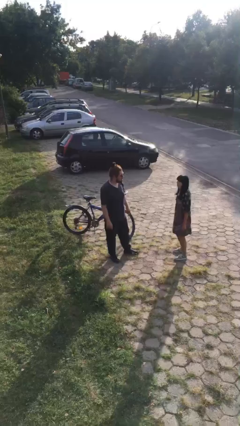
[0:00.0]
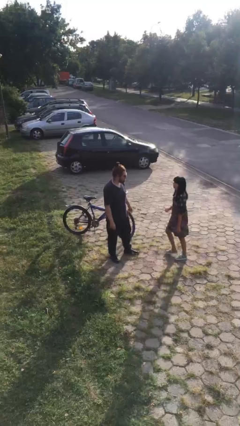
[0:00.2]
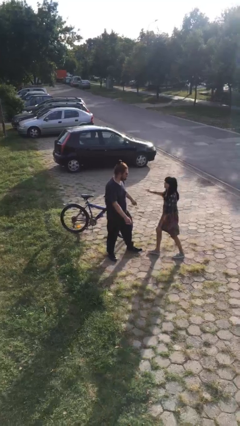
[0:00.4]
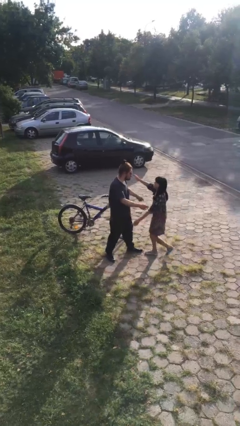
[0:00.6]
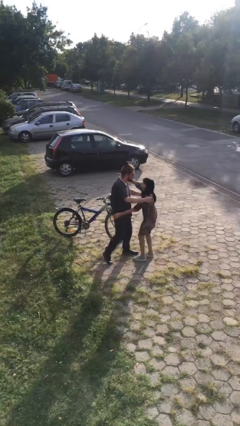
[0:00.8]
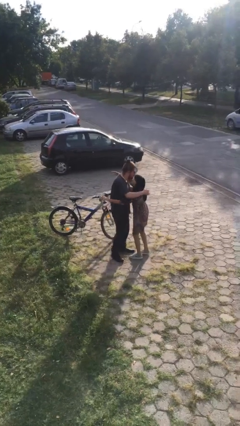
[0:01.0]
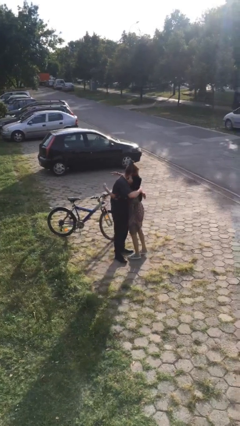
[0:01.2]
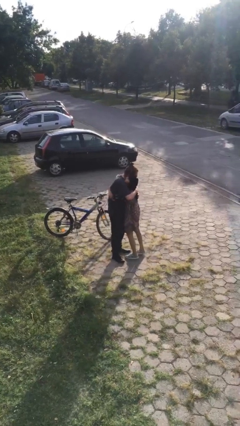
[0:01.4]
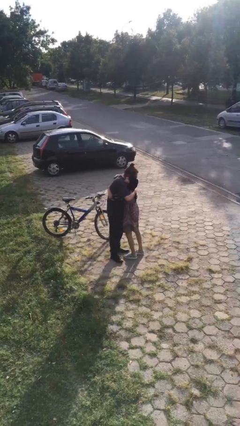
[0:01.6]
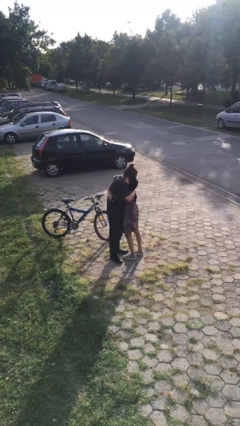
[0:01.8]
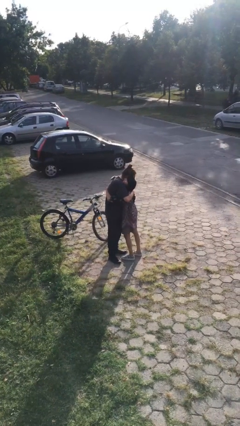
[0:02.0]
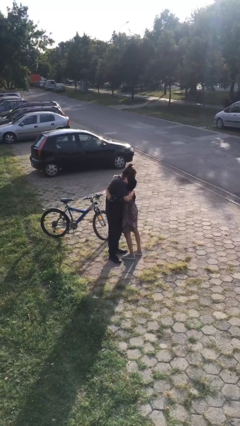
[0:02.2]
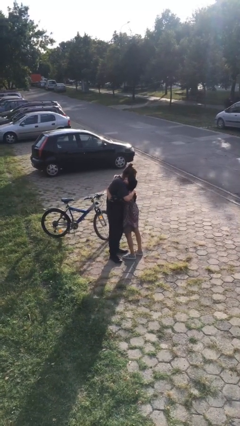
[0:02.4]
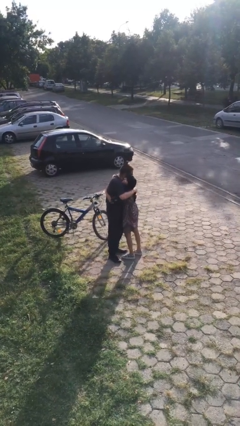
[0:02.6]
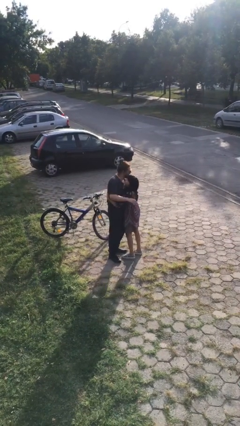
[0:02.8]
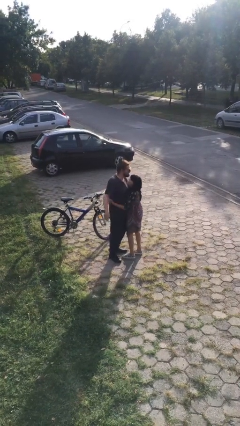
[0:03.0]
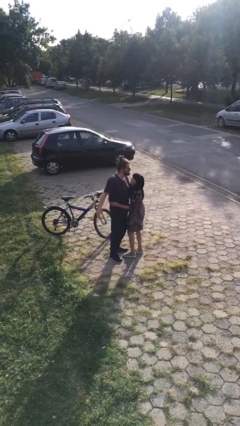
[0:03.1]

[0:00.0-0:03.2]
person embraces person

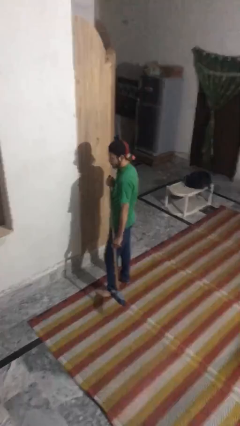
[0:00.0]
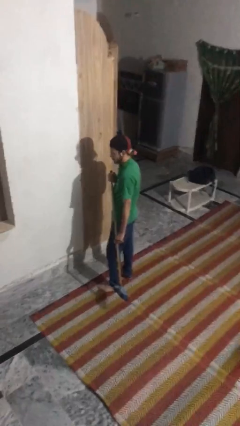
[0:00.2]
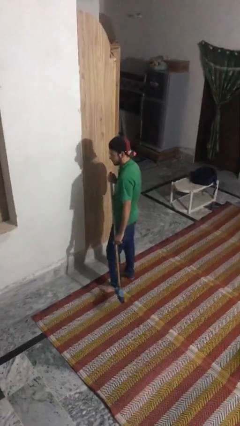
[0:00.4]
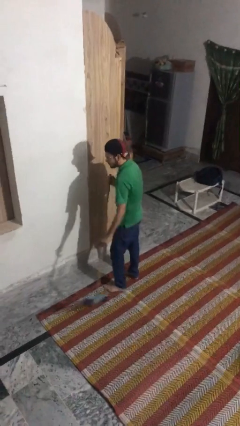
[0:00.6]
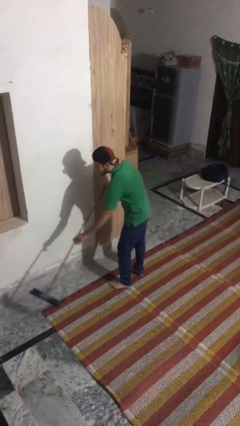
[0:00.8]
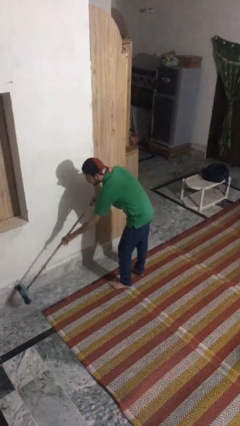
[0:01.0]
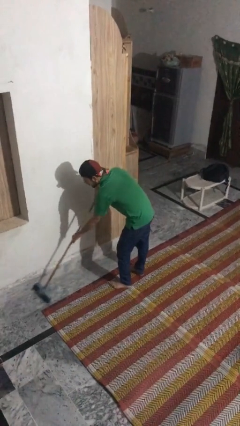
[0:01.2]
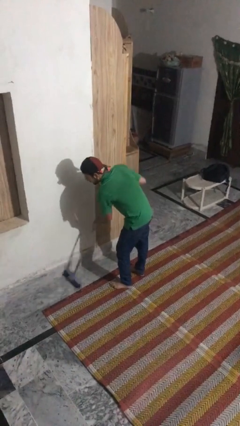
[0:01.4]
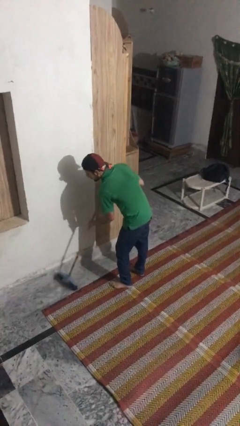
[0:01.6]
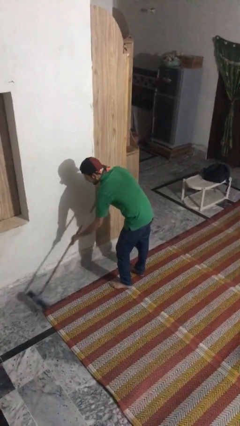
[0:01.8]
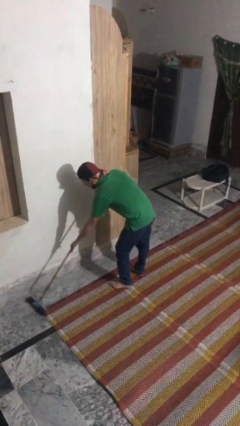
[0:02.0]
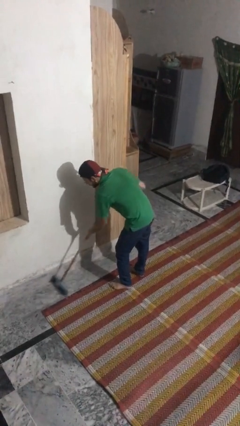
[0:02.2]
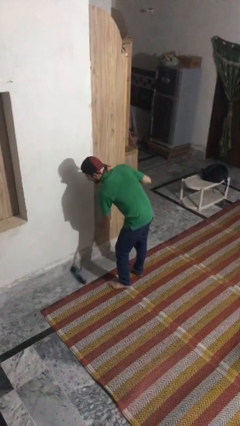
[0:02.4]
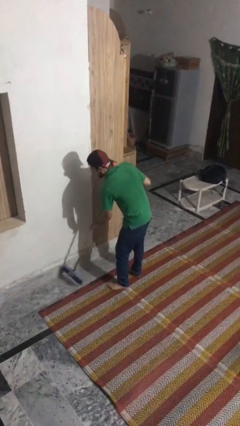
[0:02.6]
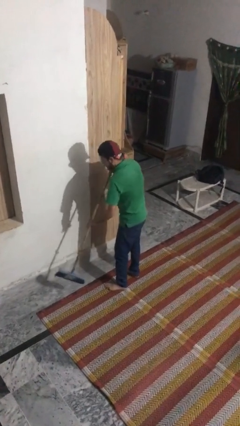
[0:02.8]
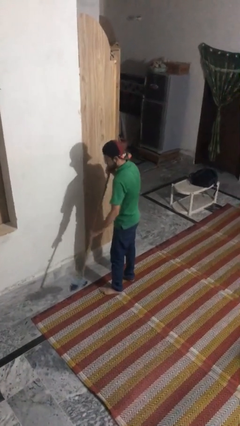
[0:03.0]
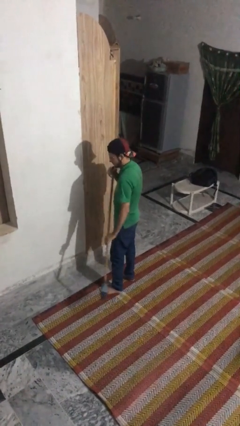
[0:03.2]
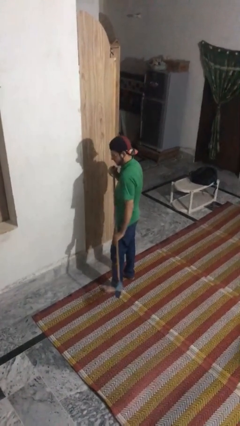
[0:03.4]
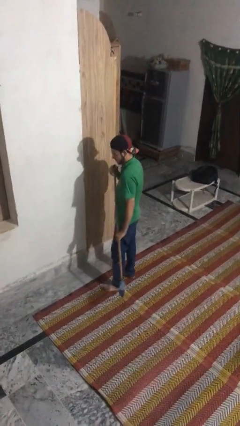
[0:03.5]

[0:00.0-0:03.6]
person sweeps floor

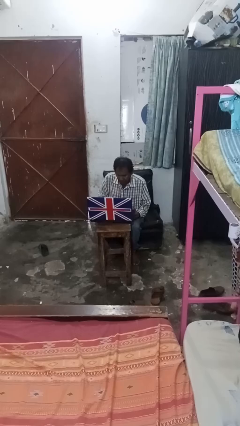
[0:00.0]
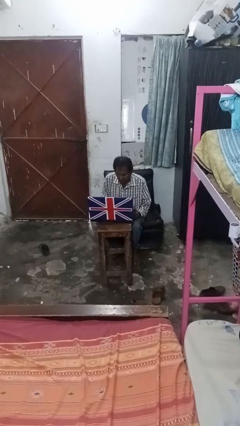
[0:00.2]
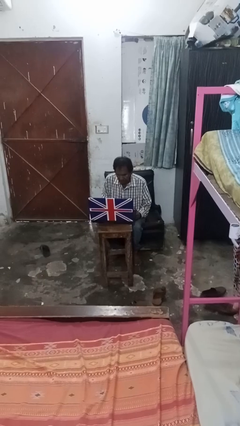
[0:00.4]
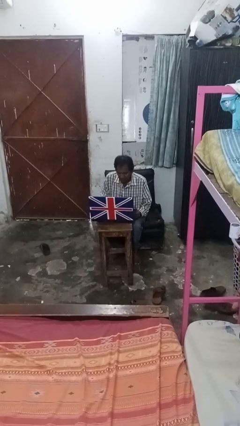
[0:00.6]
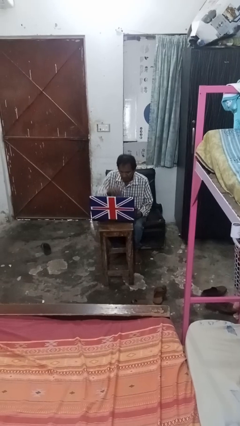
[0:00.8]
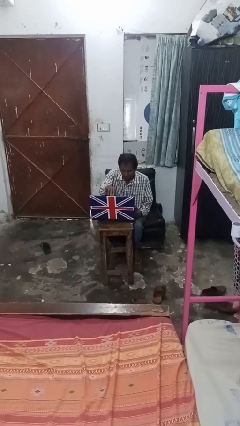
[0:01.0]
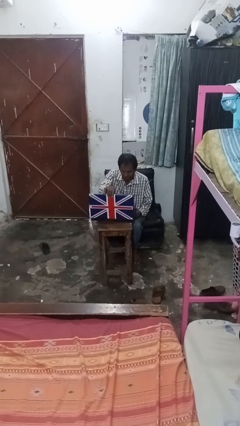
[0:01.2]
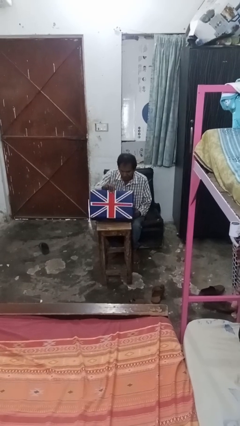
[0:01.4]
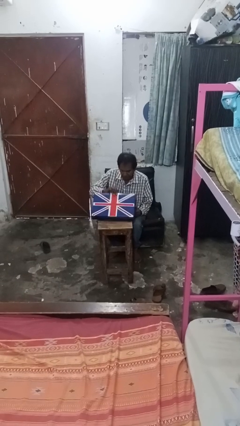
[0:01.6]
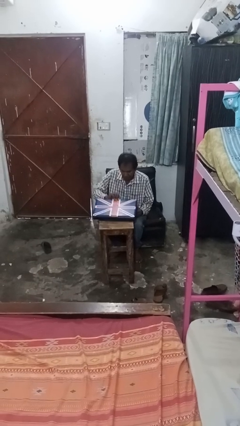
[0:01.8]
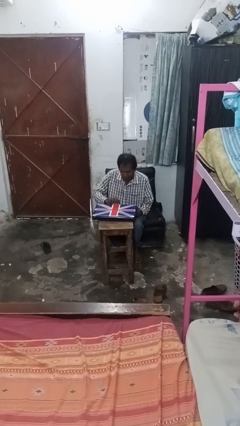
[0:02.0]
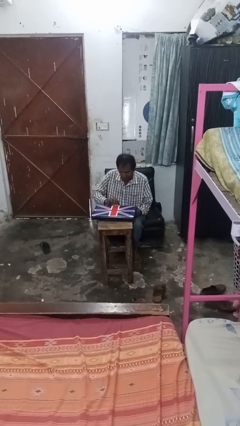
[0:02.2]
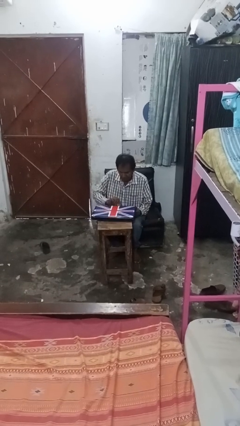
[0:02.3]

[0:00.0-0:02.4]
person closes laptop

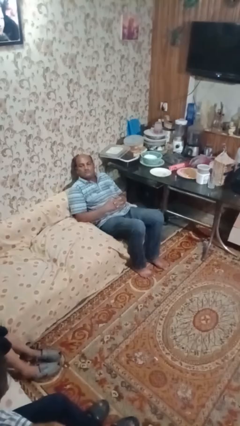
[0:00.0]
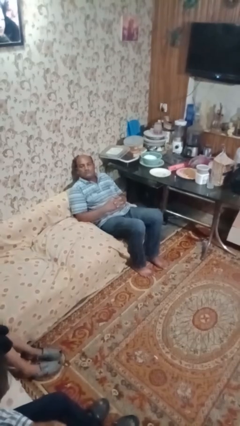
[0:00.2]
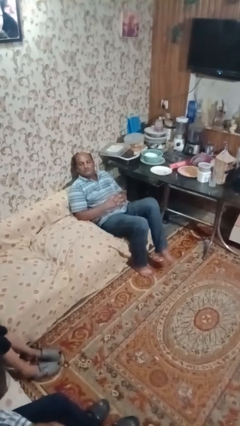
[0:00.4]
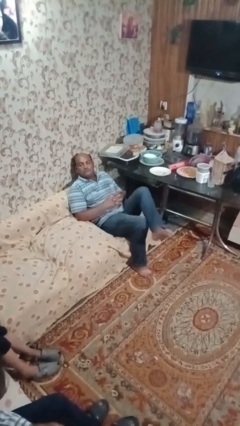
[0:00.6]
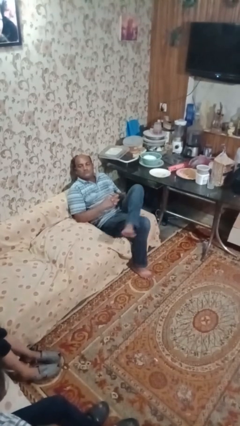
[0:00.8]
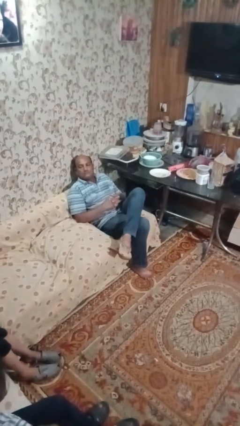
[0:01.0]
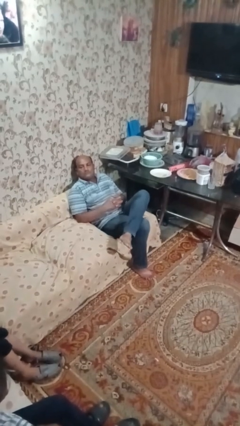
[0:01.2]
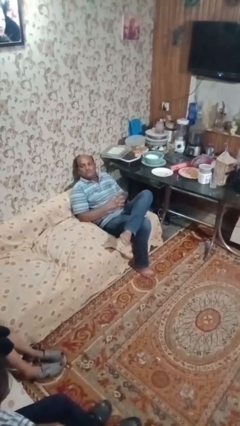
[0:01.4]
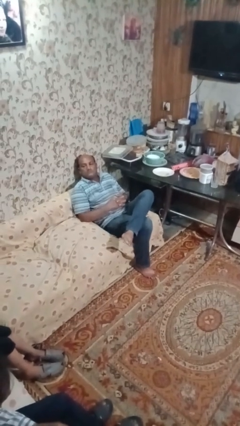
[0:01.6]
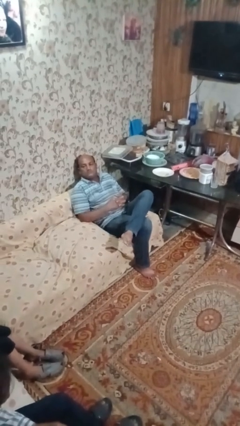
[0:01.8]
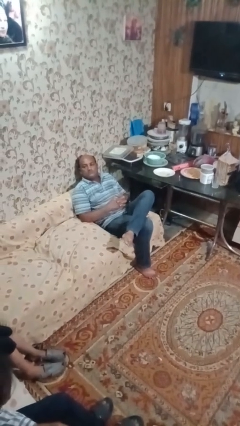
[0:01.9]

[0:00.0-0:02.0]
person crosses legs

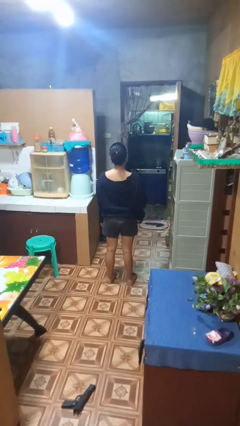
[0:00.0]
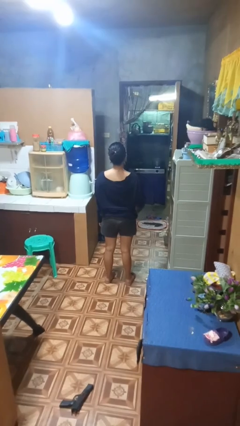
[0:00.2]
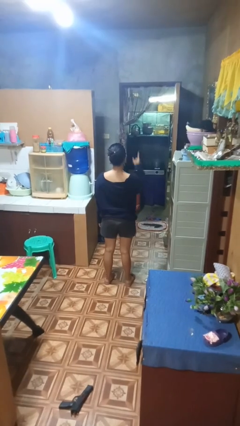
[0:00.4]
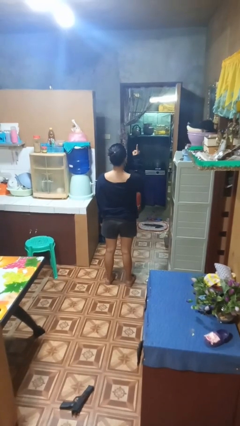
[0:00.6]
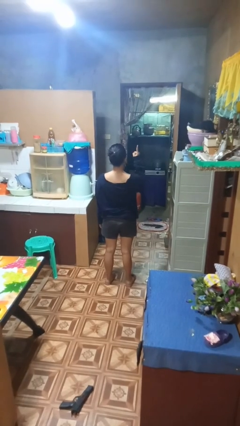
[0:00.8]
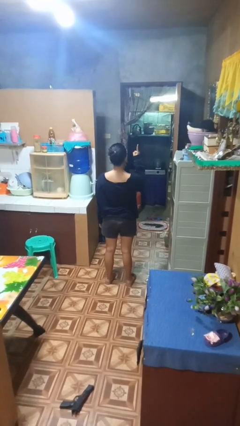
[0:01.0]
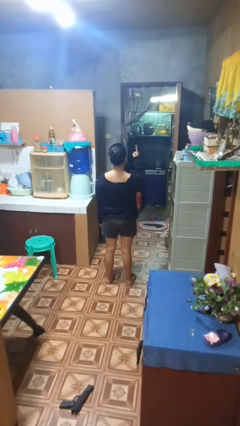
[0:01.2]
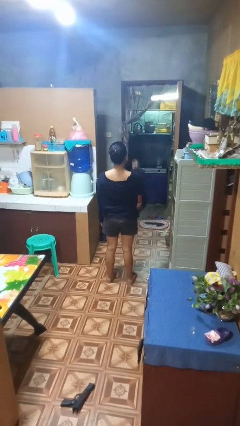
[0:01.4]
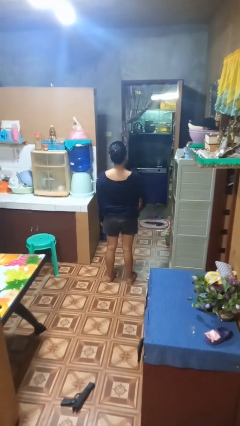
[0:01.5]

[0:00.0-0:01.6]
person gestures number one

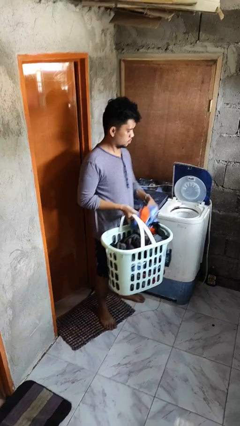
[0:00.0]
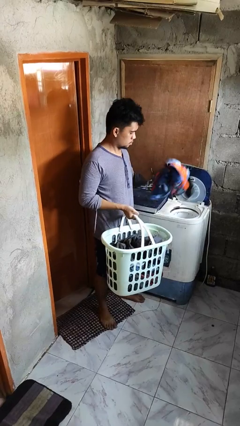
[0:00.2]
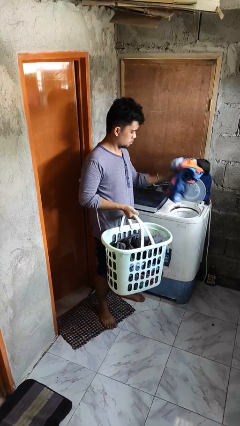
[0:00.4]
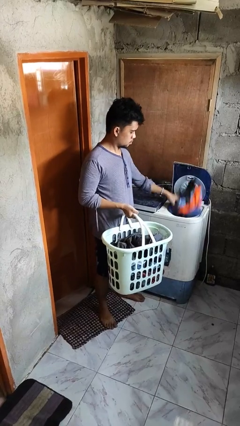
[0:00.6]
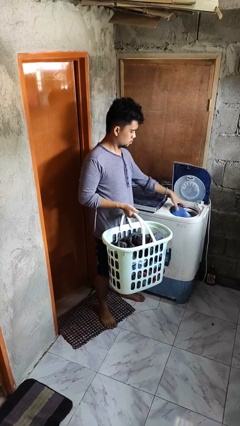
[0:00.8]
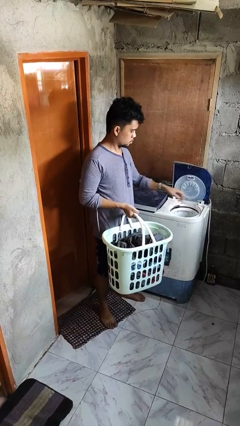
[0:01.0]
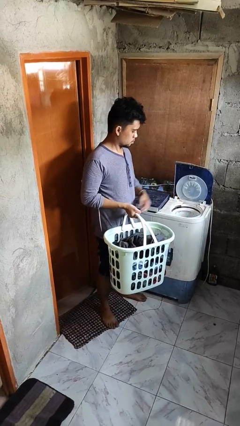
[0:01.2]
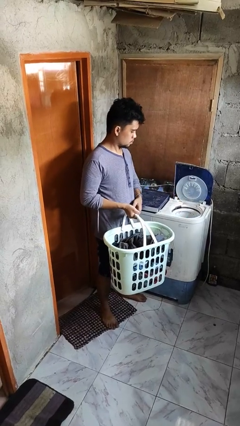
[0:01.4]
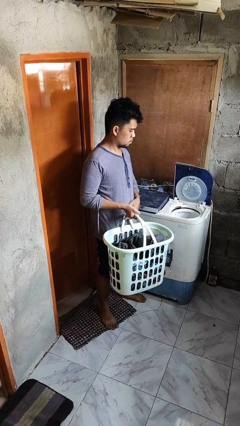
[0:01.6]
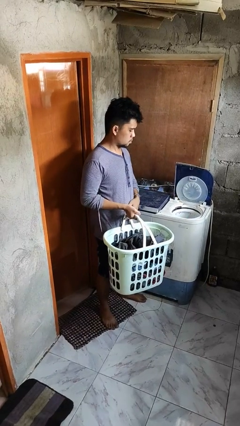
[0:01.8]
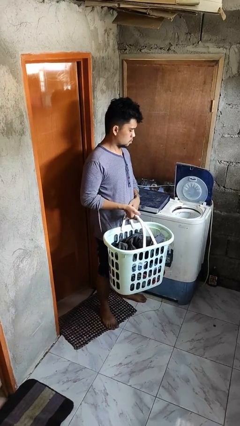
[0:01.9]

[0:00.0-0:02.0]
person loads dryer

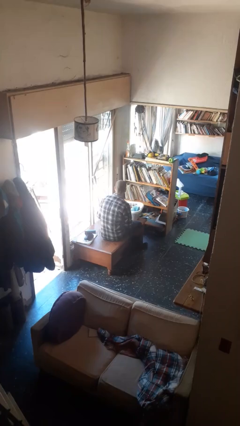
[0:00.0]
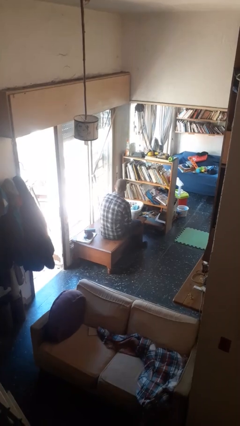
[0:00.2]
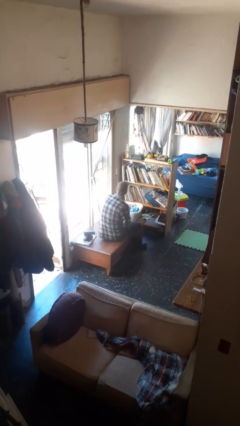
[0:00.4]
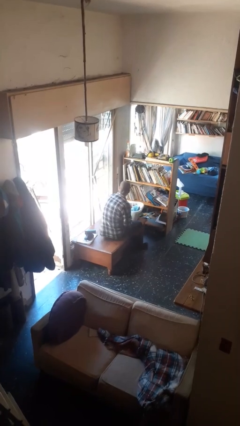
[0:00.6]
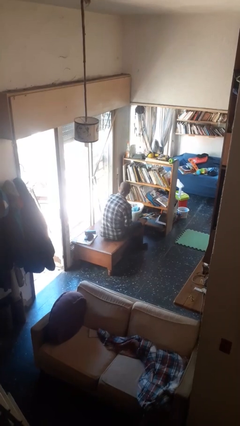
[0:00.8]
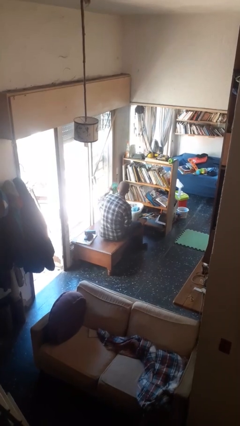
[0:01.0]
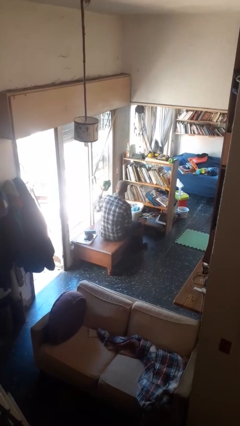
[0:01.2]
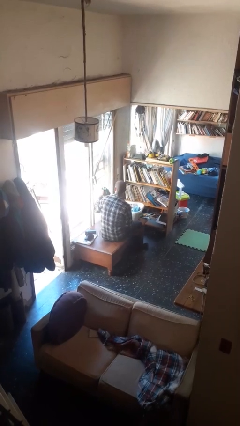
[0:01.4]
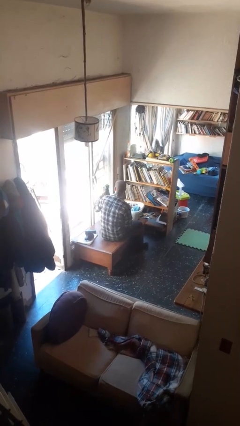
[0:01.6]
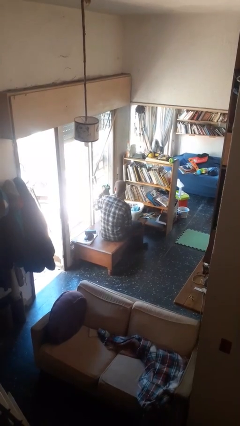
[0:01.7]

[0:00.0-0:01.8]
person takes object from basket

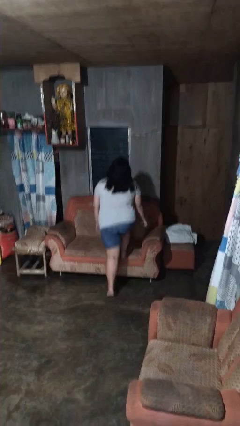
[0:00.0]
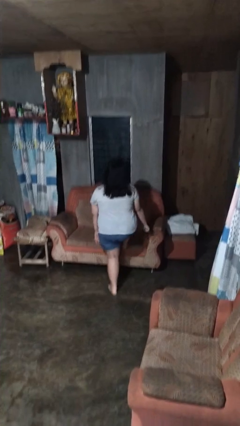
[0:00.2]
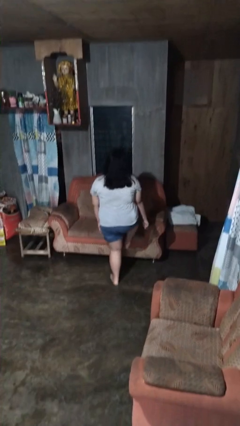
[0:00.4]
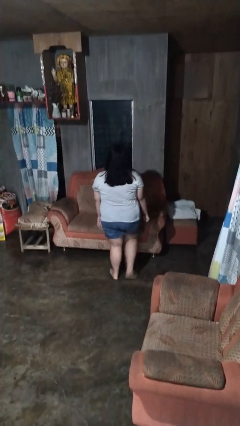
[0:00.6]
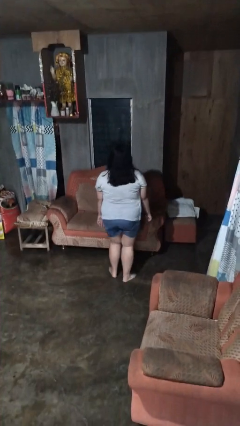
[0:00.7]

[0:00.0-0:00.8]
person climbs off couch
